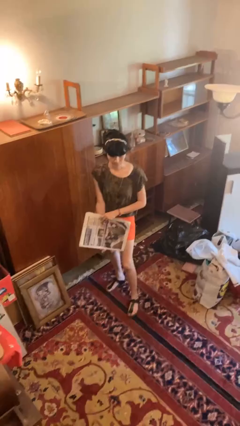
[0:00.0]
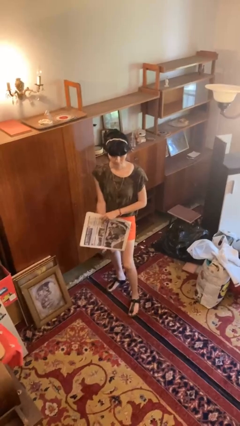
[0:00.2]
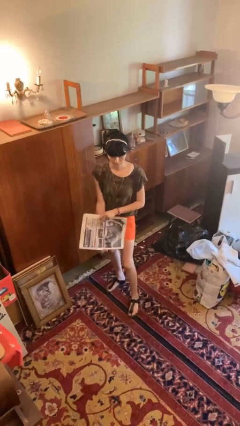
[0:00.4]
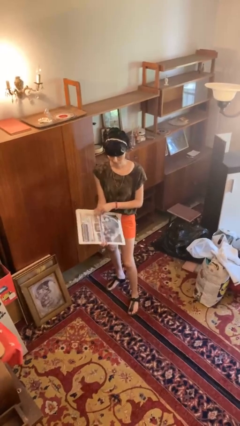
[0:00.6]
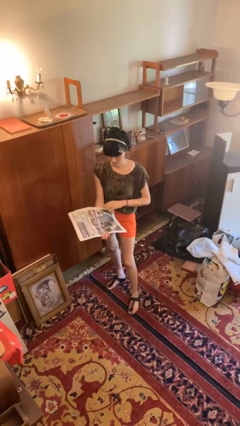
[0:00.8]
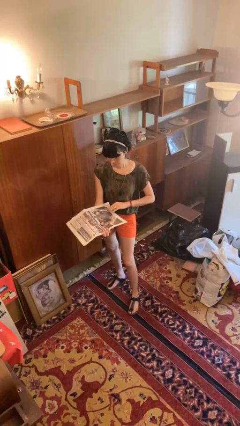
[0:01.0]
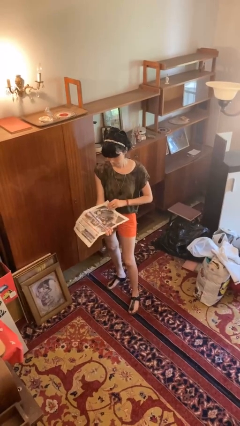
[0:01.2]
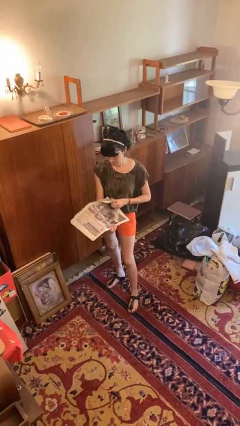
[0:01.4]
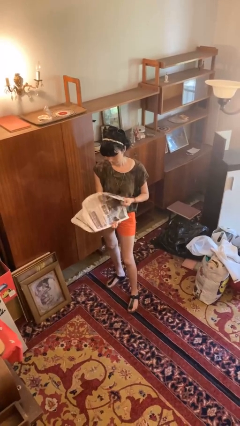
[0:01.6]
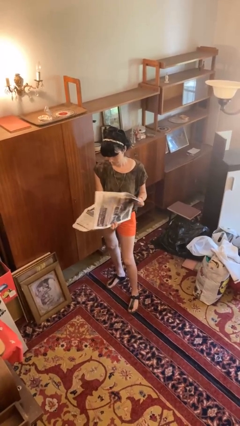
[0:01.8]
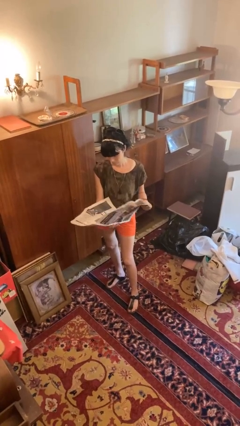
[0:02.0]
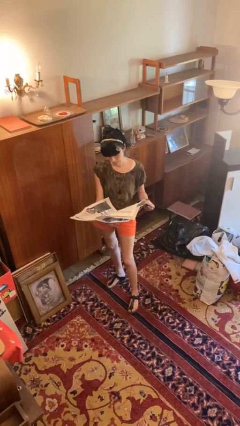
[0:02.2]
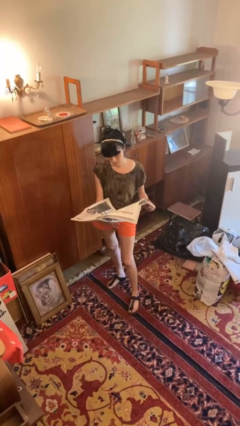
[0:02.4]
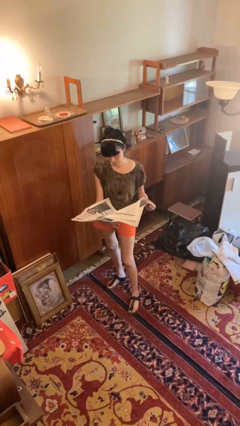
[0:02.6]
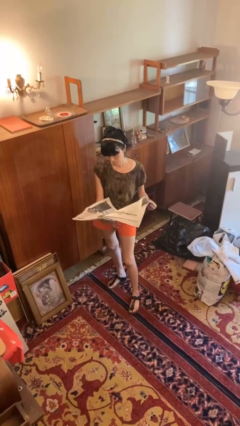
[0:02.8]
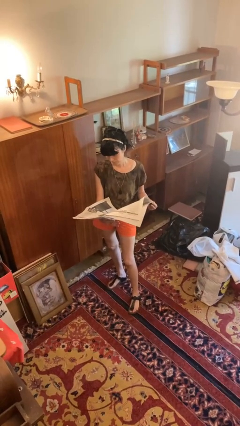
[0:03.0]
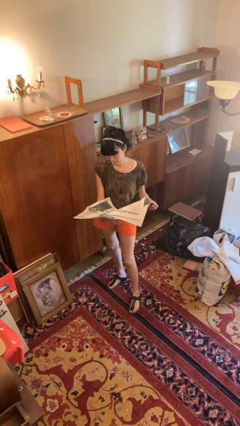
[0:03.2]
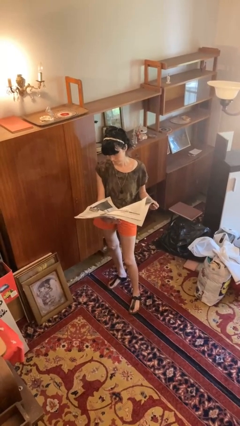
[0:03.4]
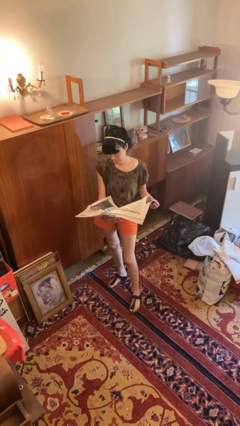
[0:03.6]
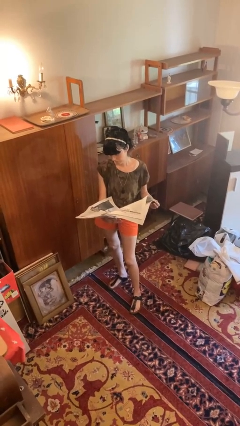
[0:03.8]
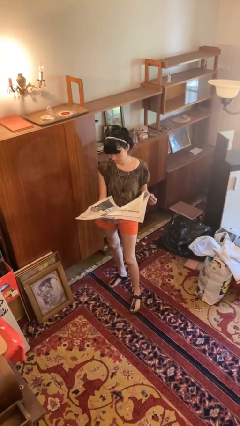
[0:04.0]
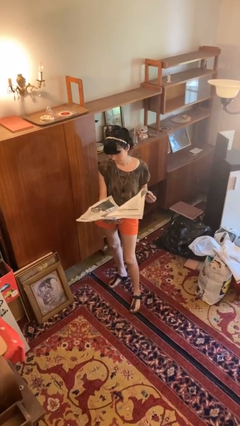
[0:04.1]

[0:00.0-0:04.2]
person reads newspaper

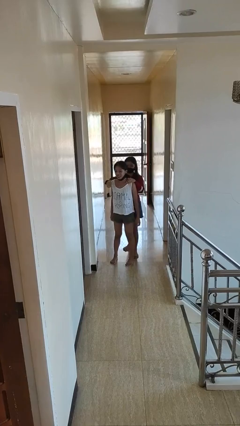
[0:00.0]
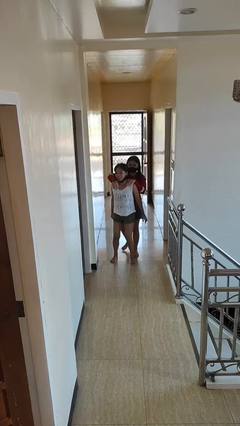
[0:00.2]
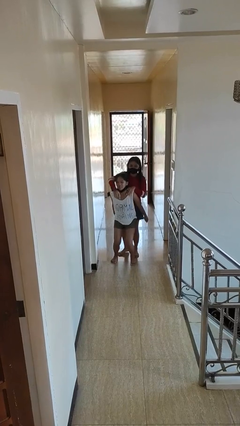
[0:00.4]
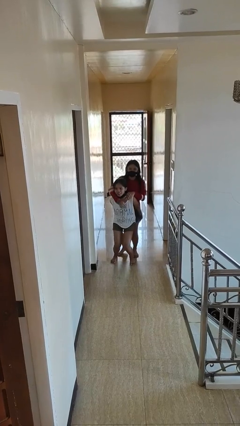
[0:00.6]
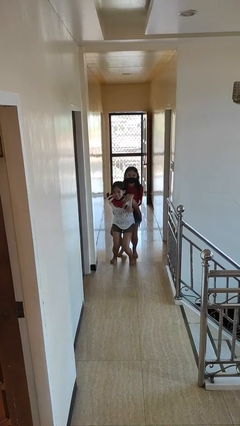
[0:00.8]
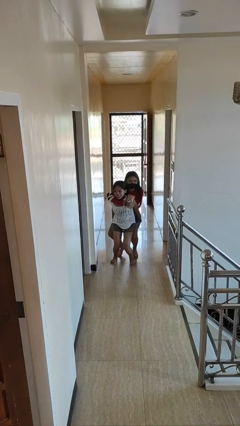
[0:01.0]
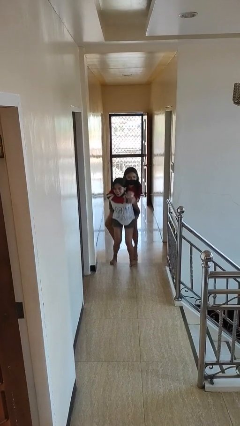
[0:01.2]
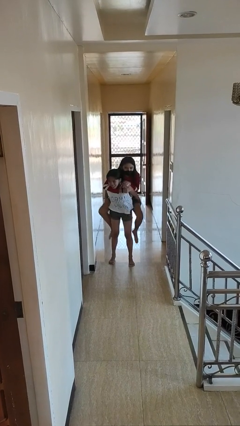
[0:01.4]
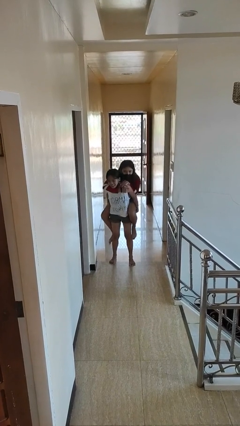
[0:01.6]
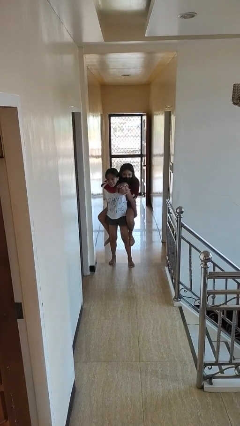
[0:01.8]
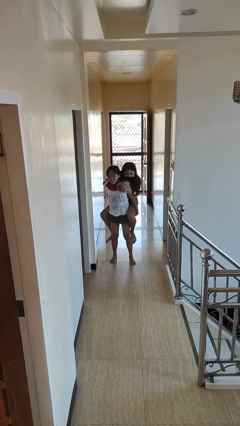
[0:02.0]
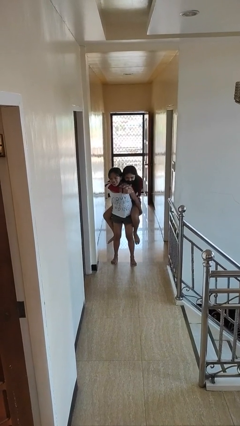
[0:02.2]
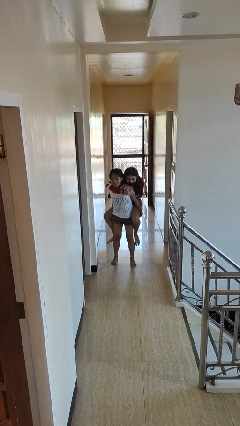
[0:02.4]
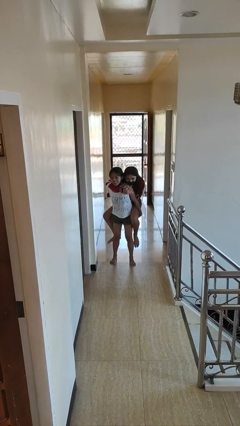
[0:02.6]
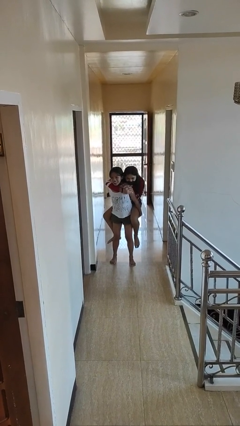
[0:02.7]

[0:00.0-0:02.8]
person carries person over shoulder

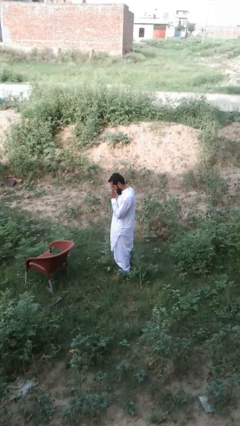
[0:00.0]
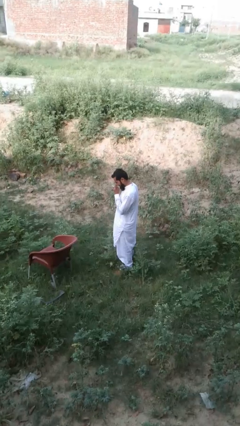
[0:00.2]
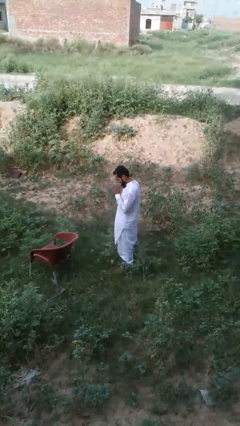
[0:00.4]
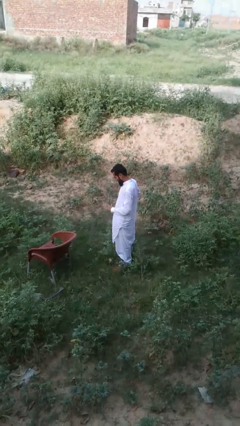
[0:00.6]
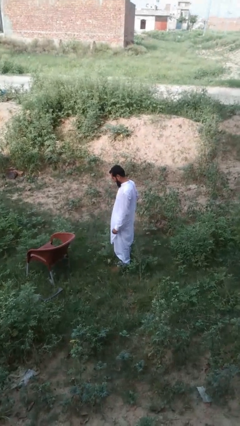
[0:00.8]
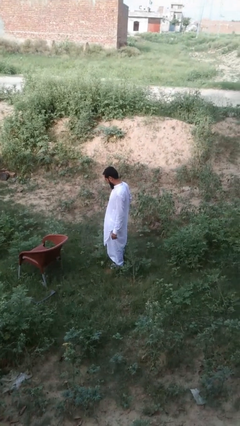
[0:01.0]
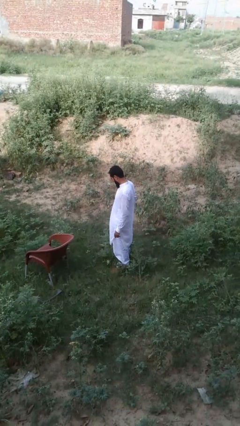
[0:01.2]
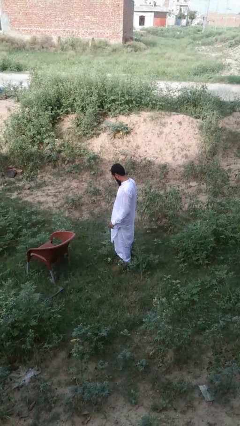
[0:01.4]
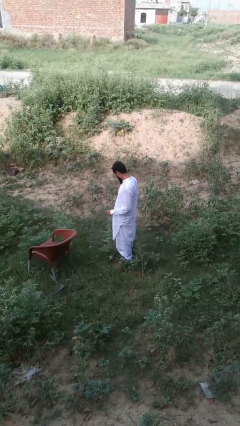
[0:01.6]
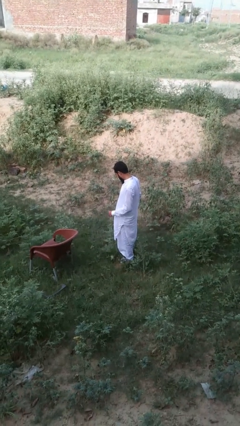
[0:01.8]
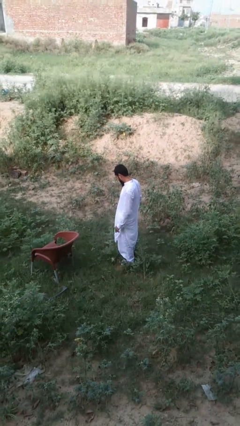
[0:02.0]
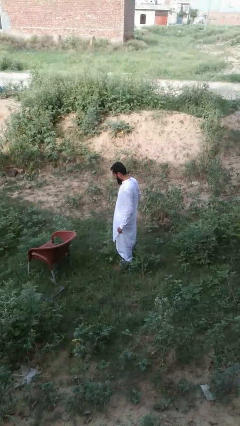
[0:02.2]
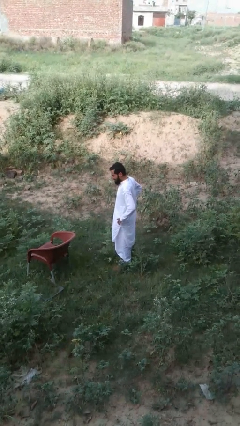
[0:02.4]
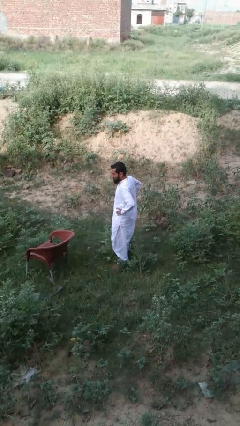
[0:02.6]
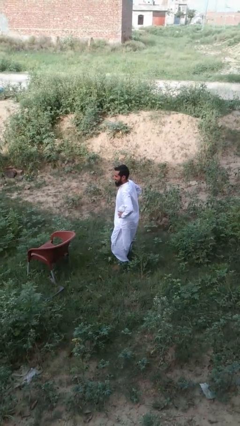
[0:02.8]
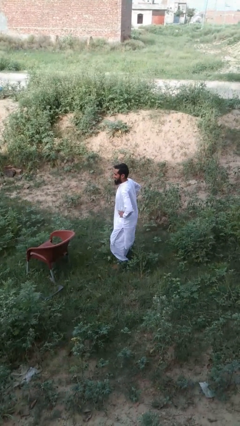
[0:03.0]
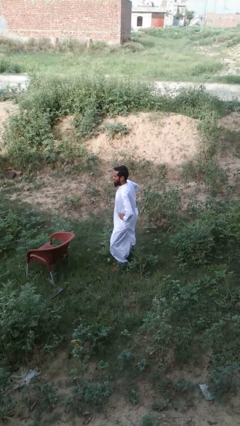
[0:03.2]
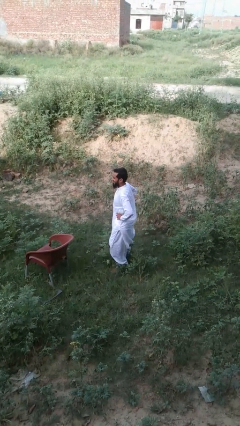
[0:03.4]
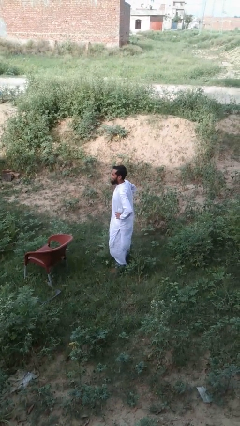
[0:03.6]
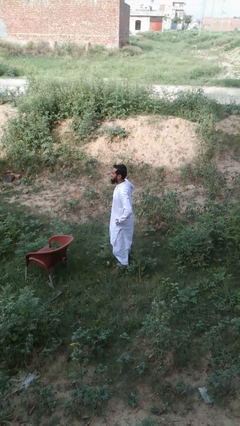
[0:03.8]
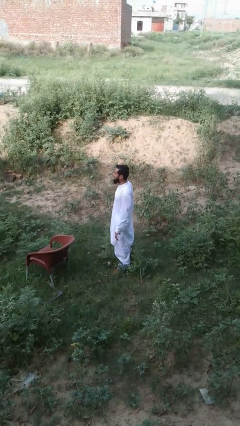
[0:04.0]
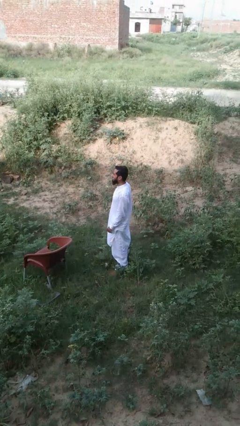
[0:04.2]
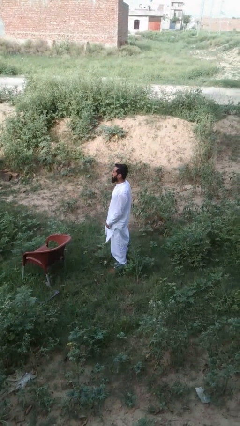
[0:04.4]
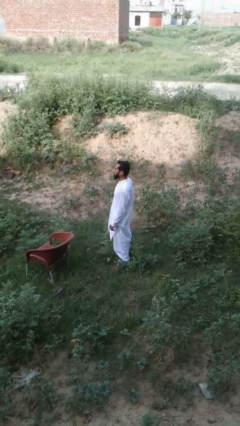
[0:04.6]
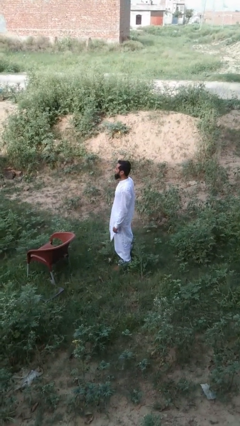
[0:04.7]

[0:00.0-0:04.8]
person wiggles hips

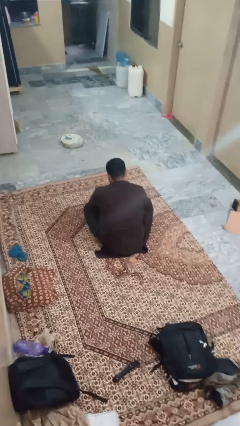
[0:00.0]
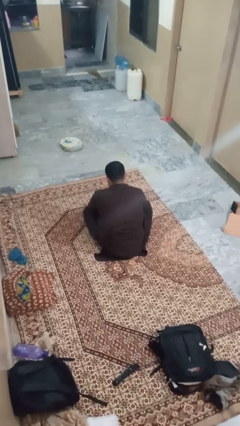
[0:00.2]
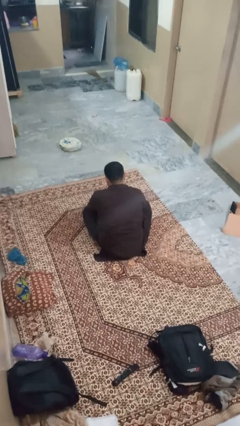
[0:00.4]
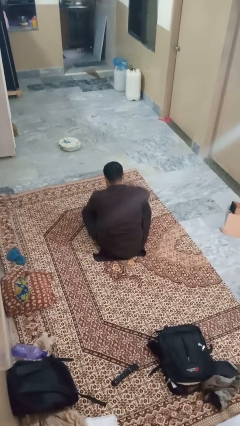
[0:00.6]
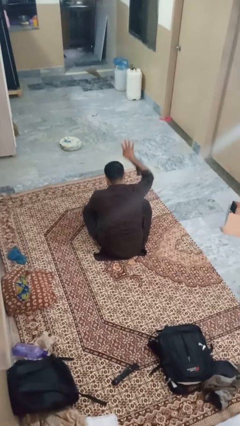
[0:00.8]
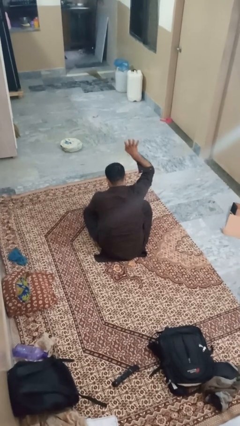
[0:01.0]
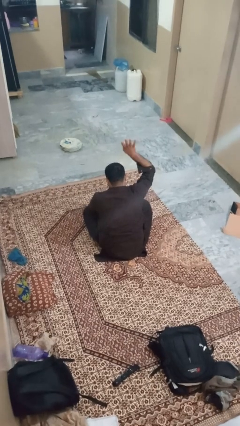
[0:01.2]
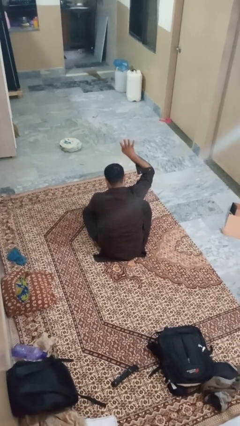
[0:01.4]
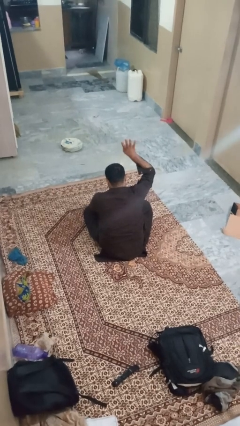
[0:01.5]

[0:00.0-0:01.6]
person gestures number four

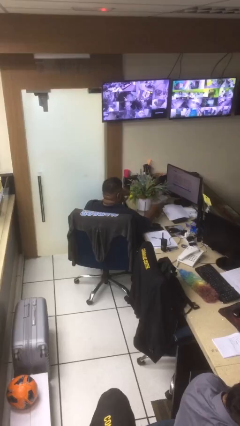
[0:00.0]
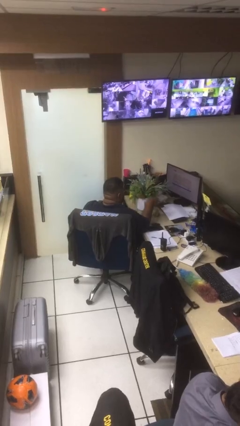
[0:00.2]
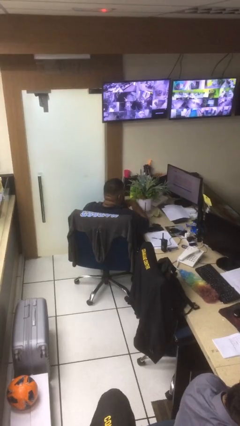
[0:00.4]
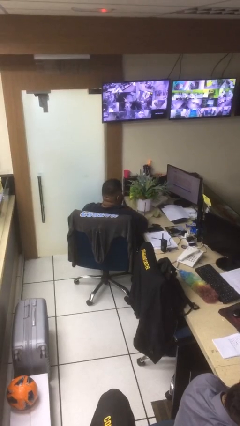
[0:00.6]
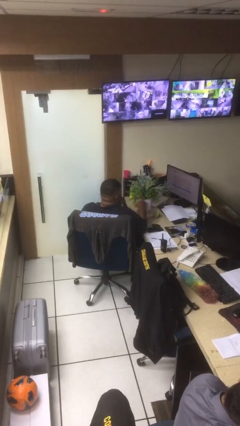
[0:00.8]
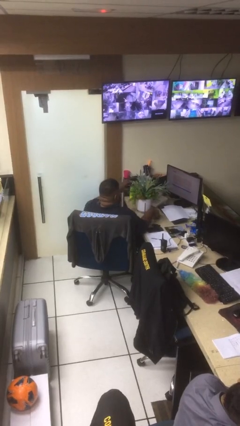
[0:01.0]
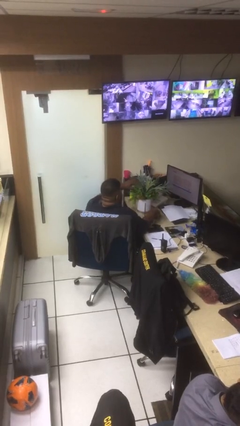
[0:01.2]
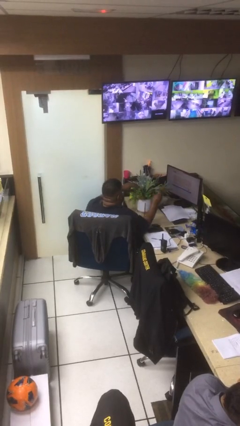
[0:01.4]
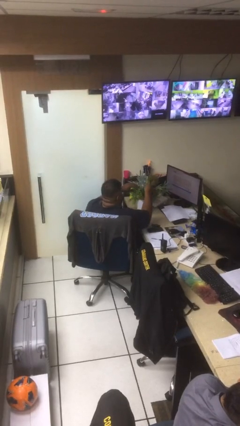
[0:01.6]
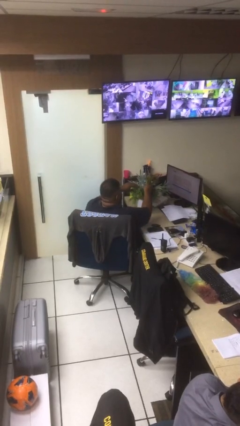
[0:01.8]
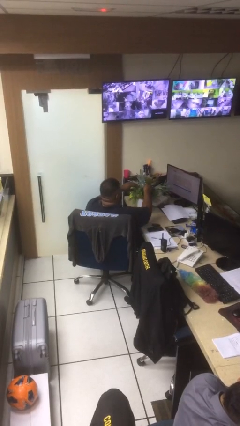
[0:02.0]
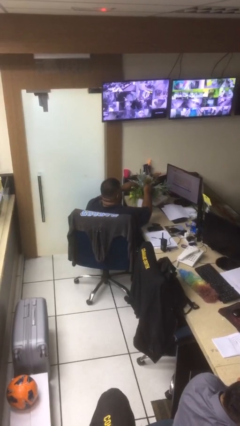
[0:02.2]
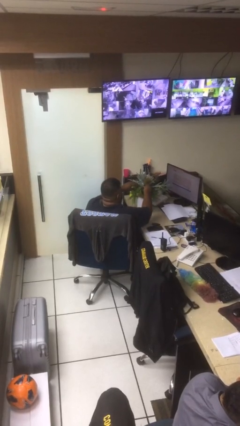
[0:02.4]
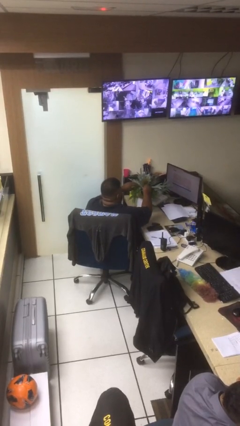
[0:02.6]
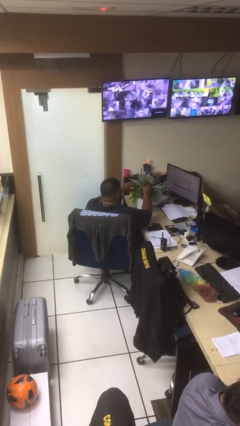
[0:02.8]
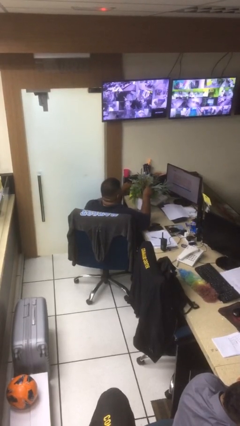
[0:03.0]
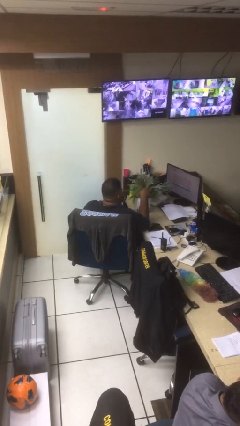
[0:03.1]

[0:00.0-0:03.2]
person arranges flowers in vase

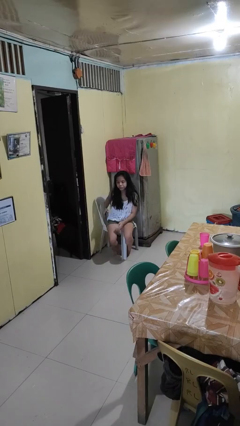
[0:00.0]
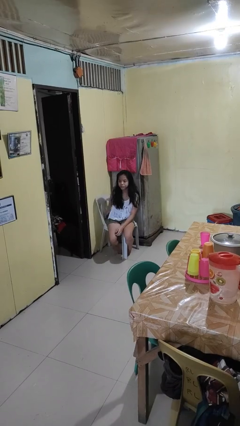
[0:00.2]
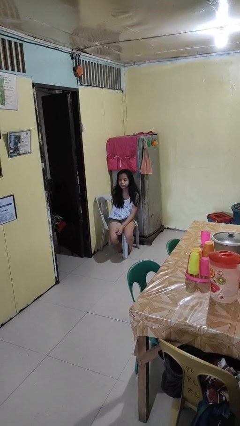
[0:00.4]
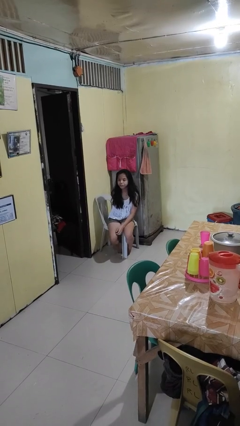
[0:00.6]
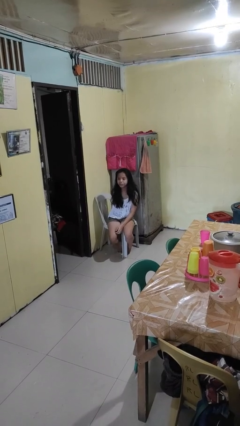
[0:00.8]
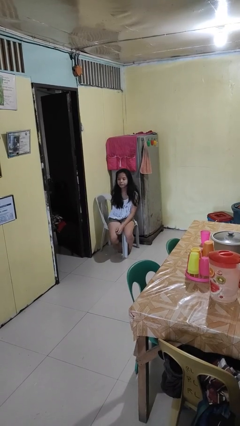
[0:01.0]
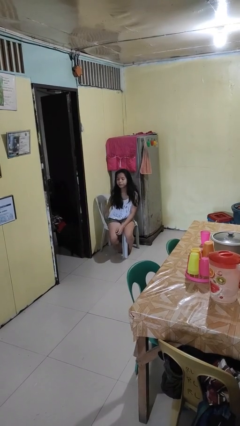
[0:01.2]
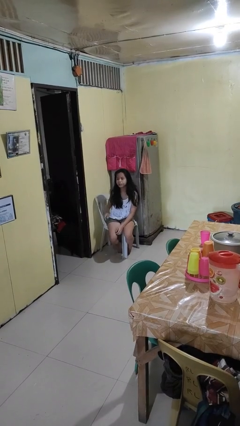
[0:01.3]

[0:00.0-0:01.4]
person puts phone into pocket
